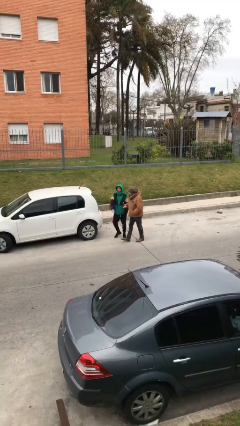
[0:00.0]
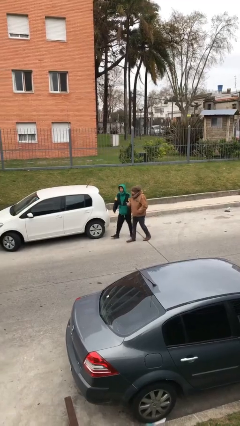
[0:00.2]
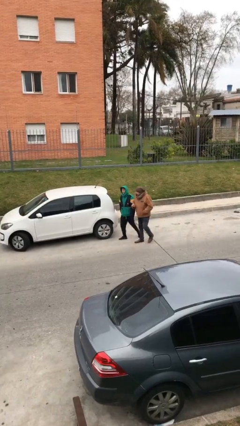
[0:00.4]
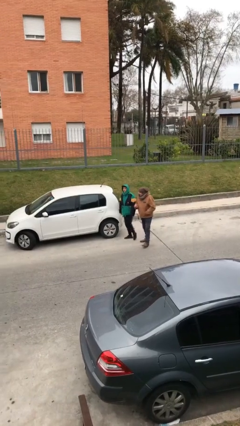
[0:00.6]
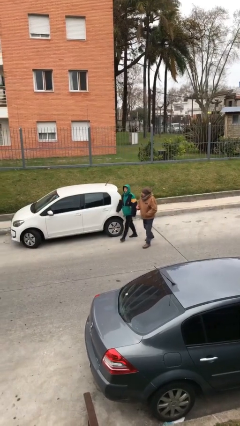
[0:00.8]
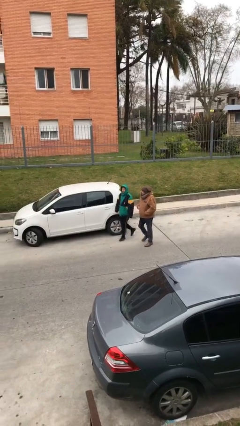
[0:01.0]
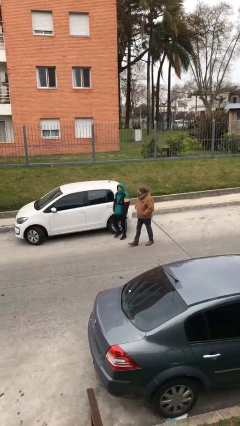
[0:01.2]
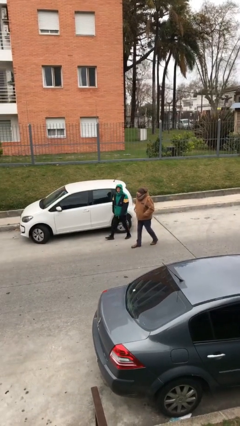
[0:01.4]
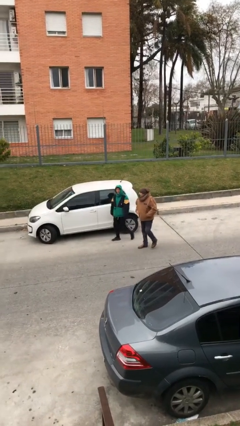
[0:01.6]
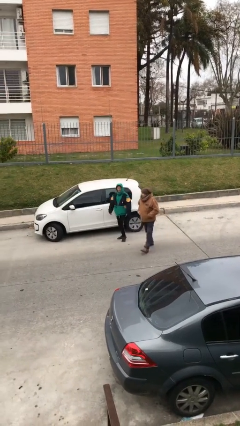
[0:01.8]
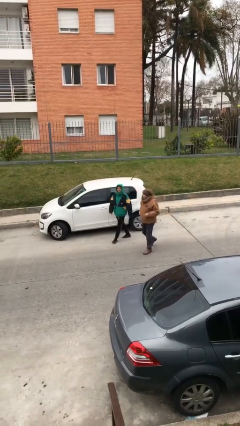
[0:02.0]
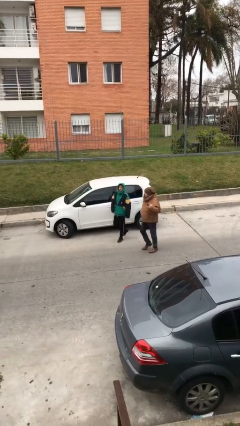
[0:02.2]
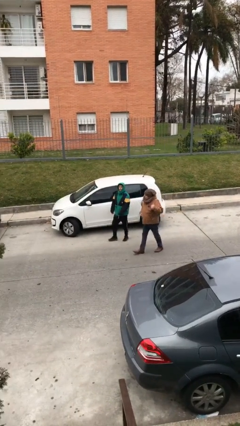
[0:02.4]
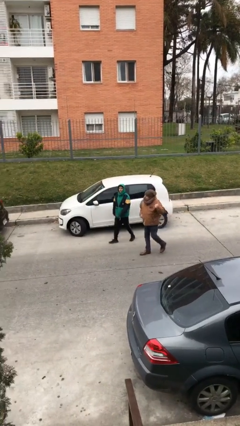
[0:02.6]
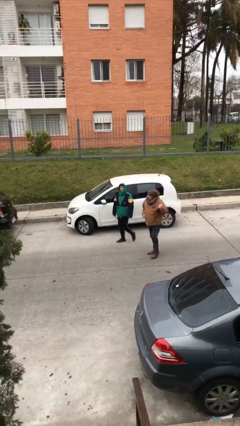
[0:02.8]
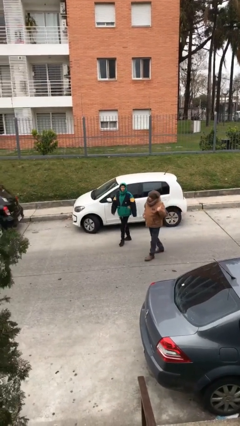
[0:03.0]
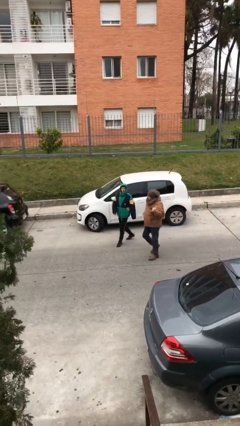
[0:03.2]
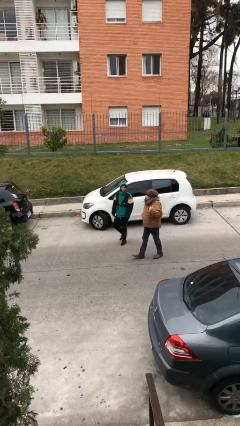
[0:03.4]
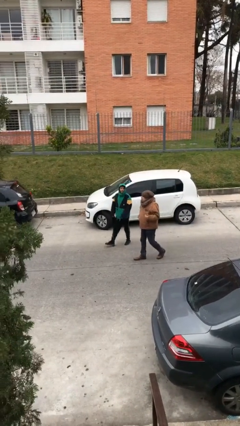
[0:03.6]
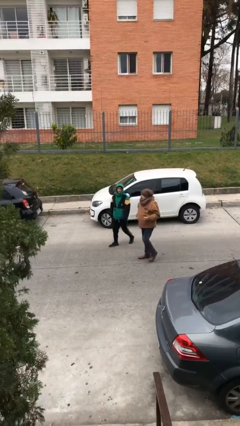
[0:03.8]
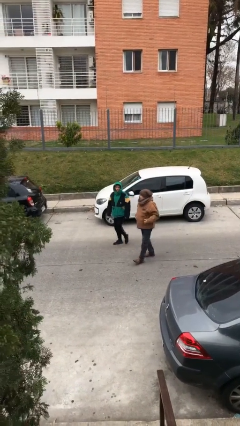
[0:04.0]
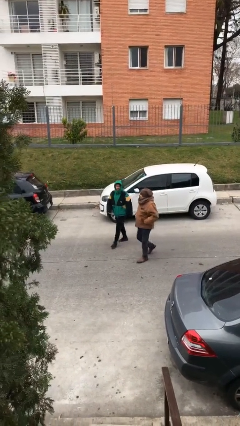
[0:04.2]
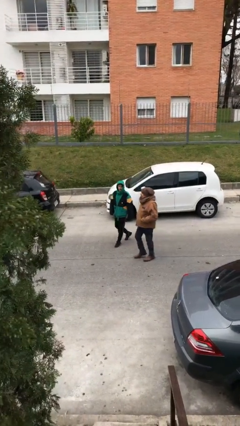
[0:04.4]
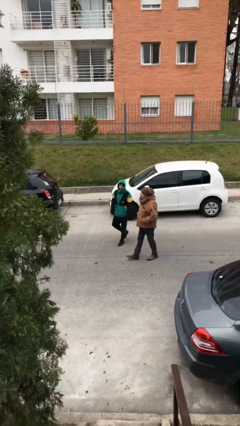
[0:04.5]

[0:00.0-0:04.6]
person talks to person

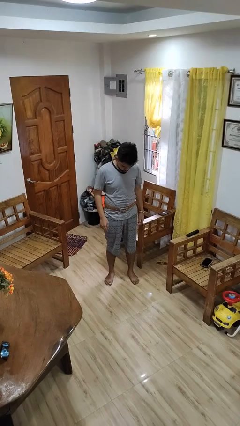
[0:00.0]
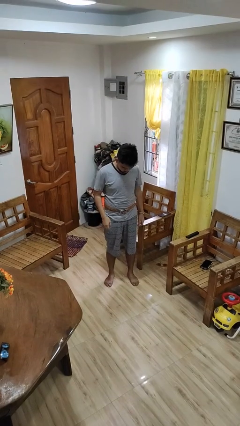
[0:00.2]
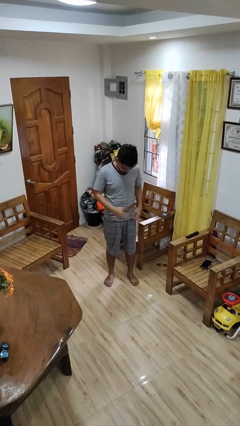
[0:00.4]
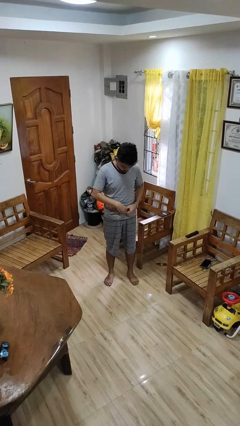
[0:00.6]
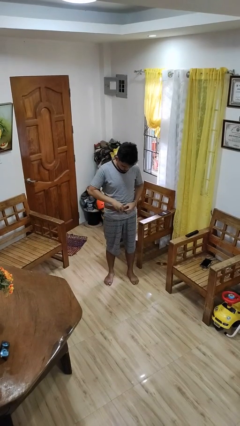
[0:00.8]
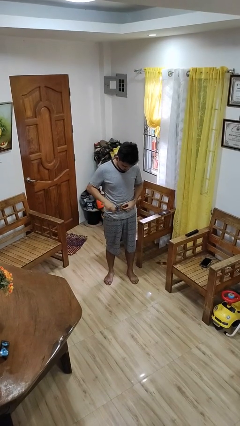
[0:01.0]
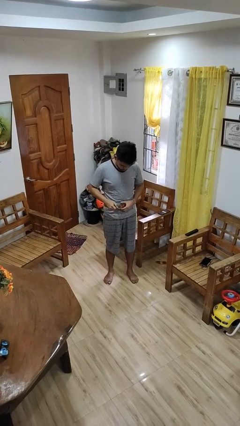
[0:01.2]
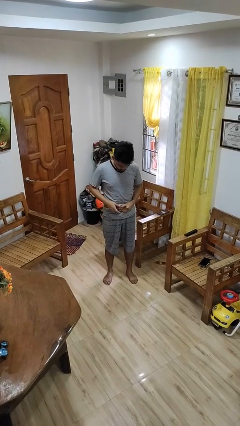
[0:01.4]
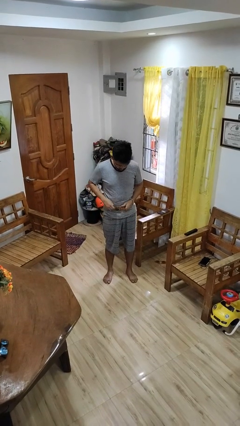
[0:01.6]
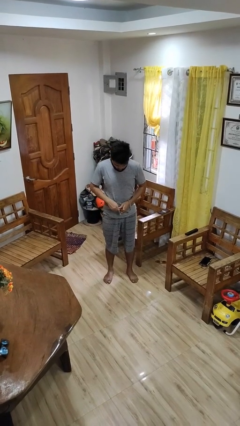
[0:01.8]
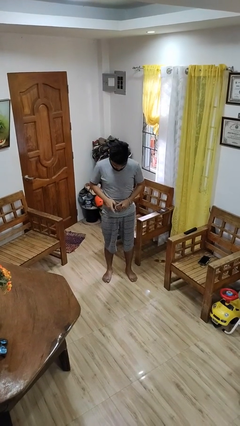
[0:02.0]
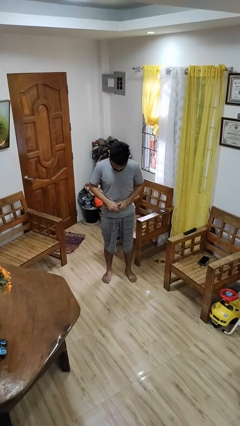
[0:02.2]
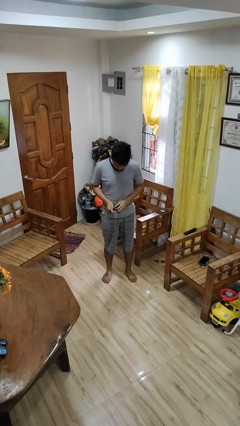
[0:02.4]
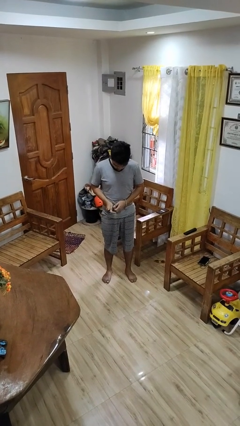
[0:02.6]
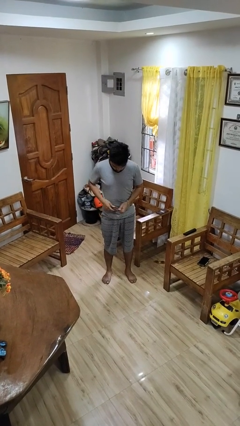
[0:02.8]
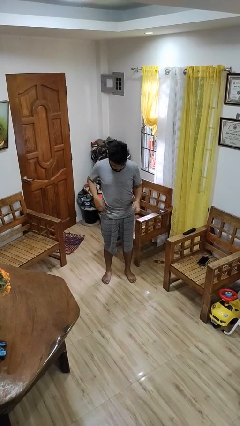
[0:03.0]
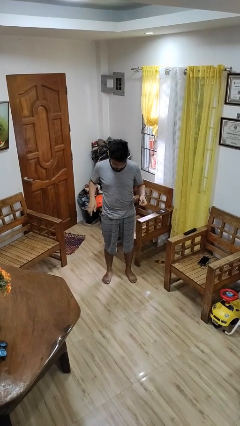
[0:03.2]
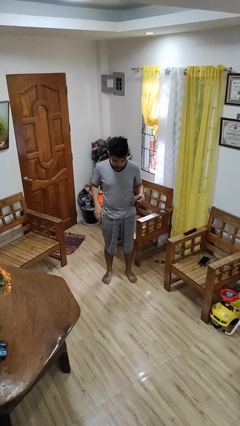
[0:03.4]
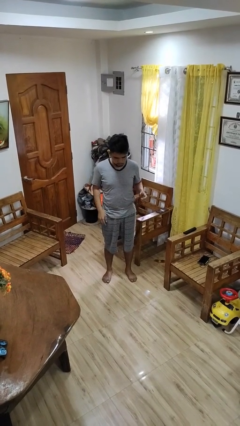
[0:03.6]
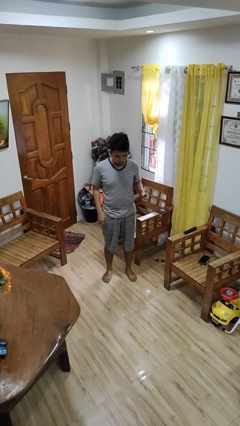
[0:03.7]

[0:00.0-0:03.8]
person takes off belt

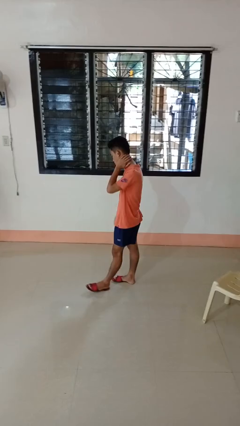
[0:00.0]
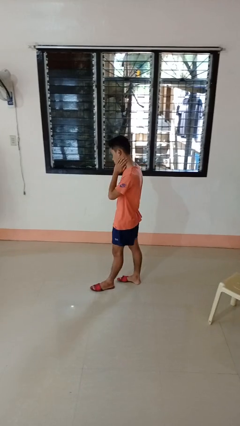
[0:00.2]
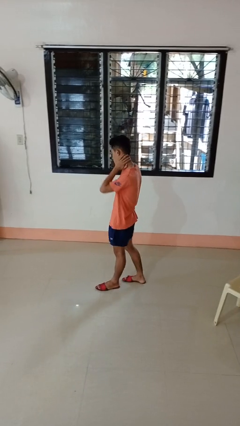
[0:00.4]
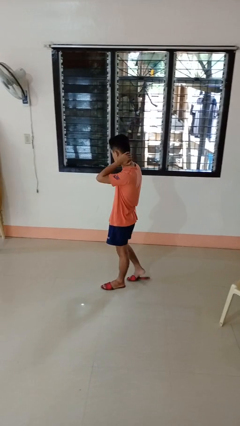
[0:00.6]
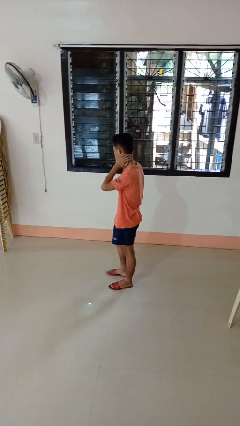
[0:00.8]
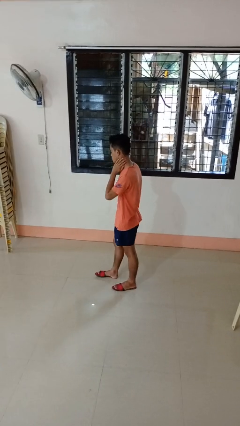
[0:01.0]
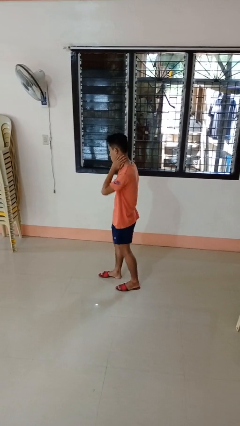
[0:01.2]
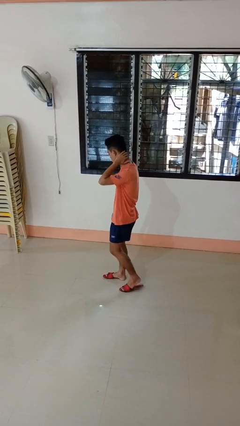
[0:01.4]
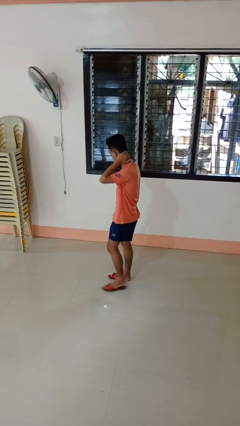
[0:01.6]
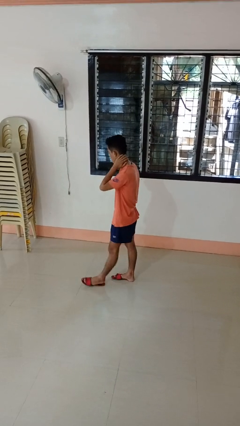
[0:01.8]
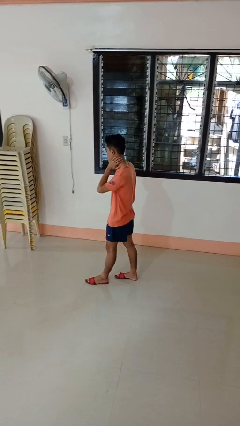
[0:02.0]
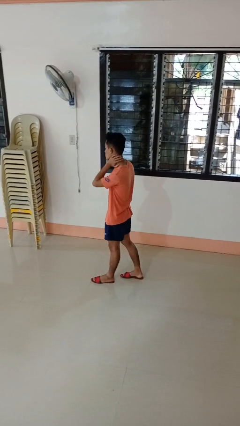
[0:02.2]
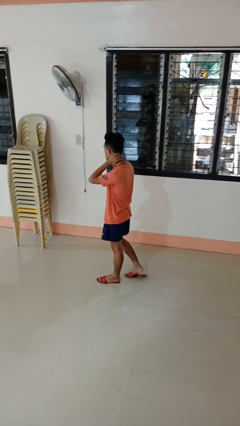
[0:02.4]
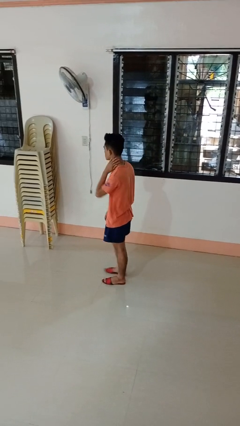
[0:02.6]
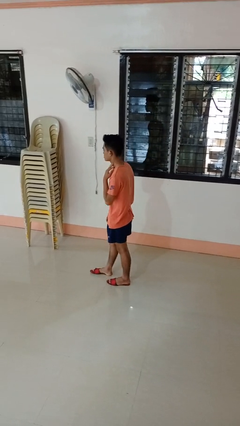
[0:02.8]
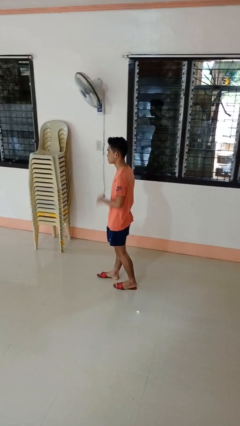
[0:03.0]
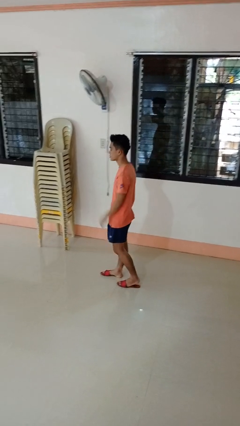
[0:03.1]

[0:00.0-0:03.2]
person rubs neck

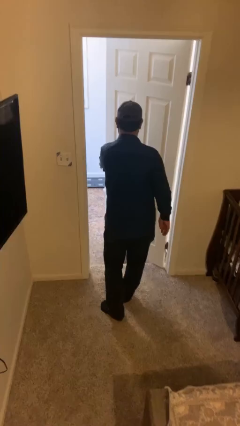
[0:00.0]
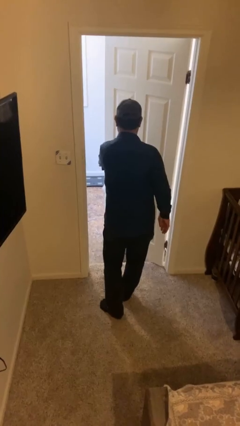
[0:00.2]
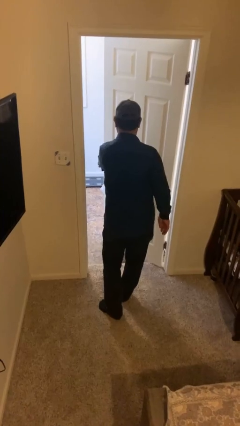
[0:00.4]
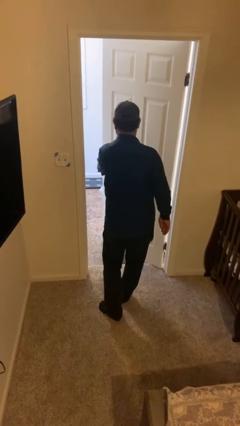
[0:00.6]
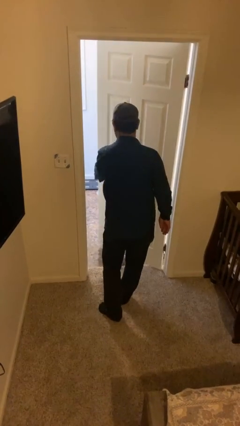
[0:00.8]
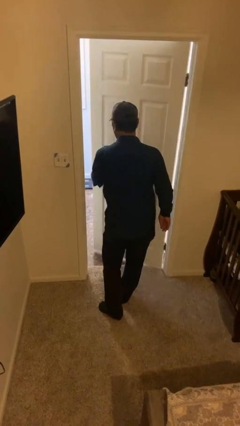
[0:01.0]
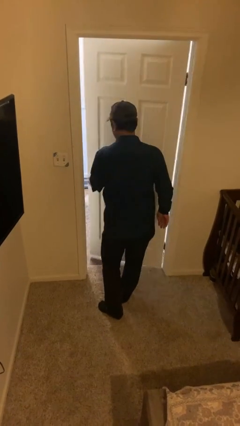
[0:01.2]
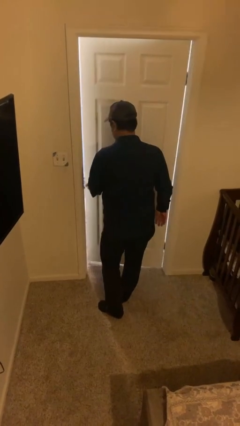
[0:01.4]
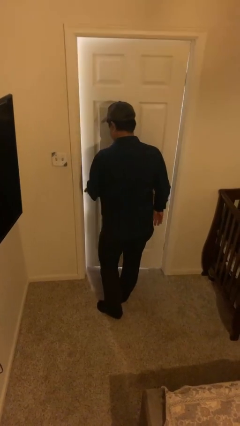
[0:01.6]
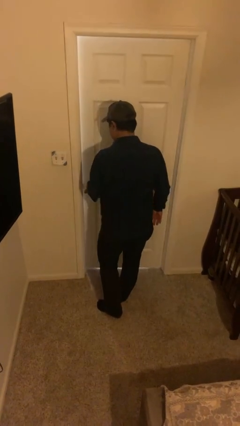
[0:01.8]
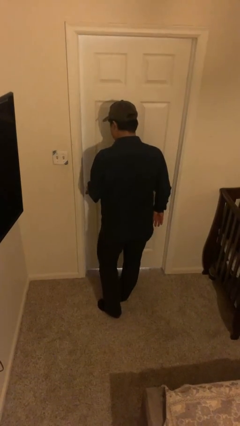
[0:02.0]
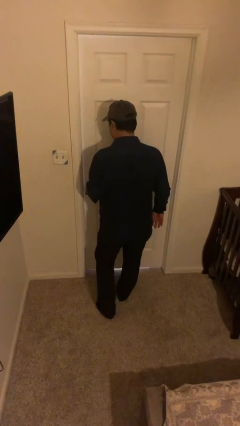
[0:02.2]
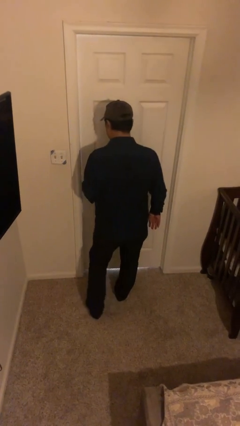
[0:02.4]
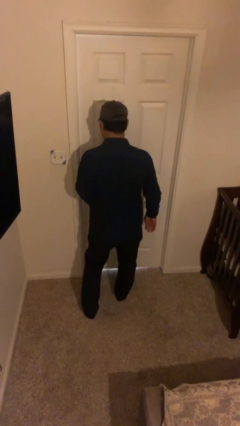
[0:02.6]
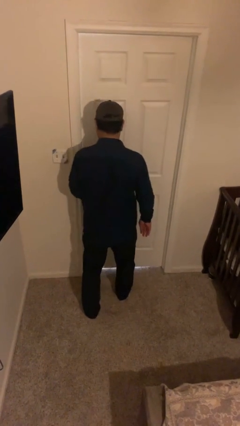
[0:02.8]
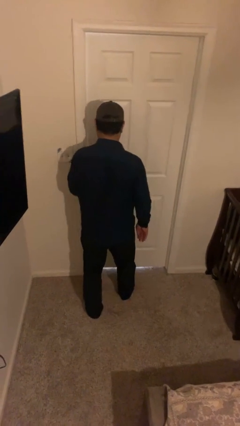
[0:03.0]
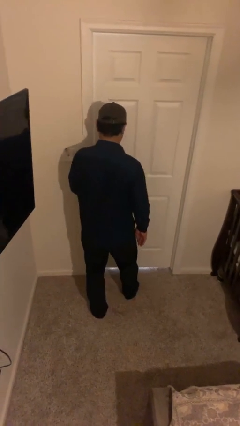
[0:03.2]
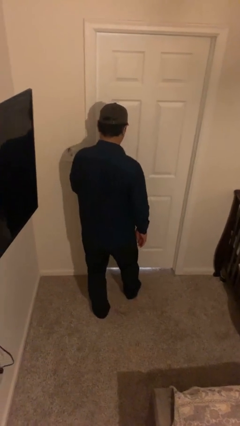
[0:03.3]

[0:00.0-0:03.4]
person closes facility door

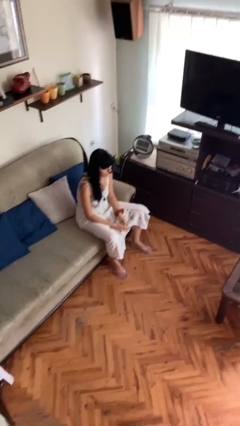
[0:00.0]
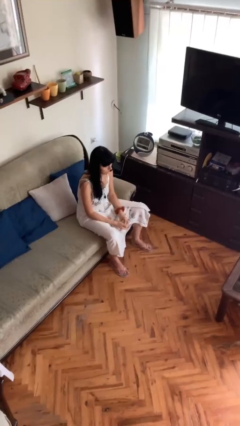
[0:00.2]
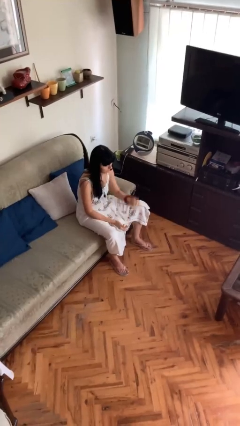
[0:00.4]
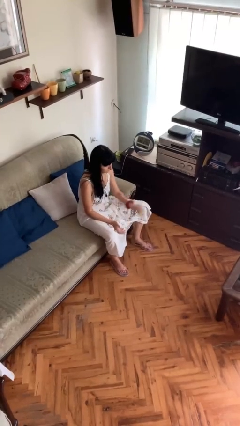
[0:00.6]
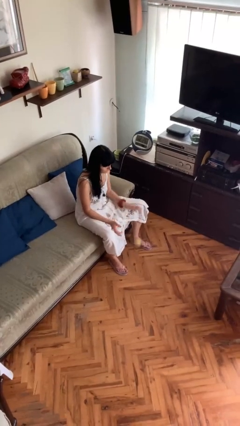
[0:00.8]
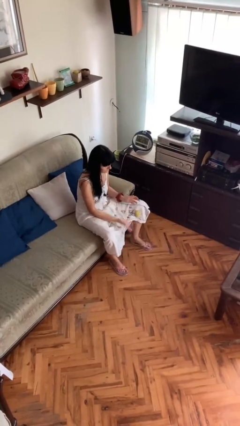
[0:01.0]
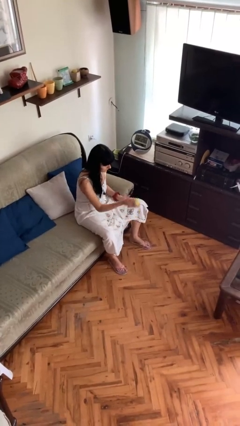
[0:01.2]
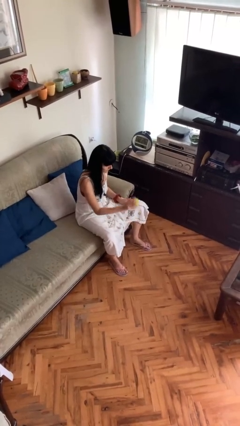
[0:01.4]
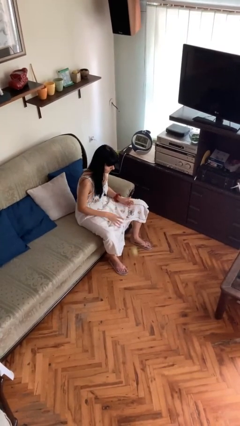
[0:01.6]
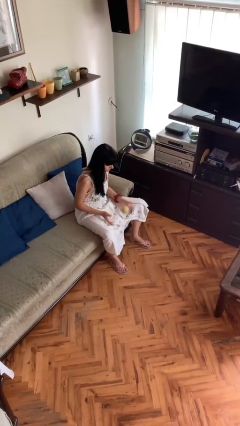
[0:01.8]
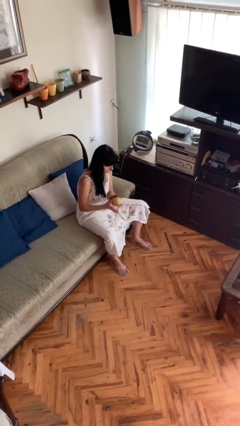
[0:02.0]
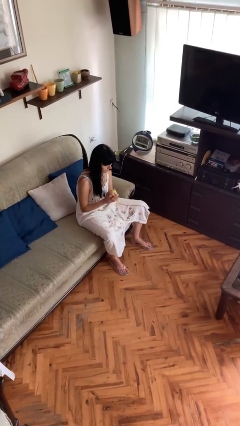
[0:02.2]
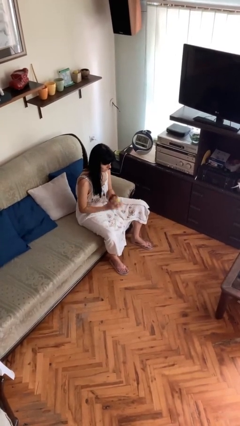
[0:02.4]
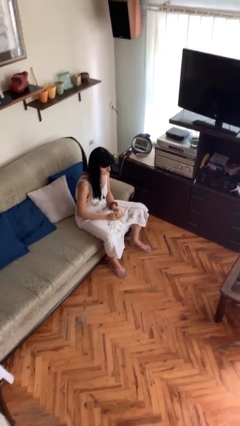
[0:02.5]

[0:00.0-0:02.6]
person bounces ball on floor
